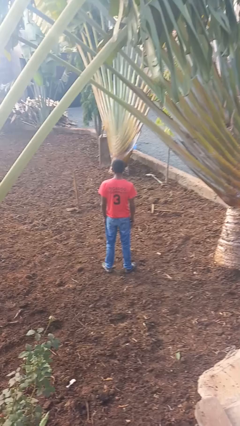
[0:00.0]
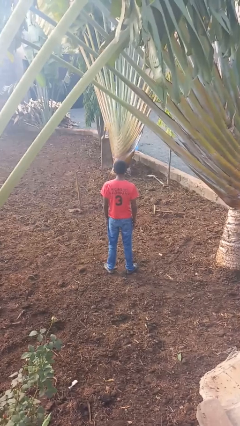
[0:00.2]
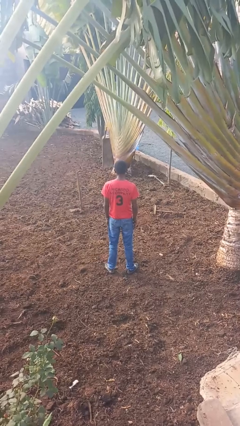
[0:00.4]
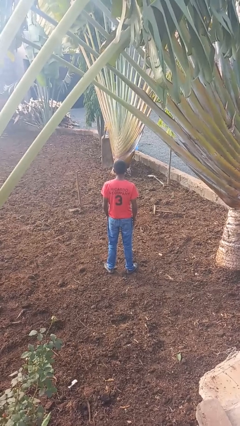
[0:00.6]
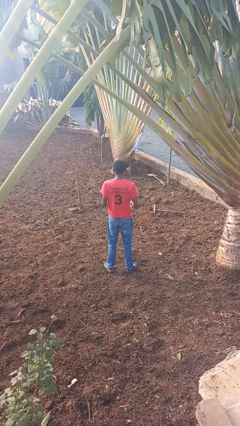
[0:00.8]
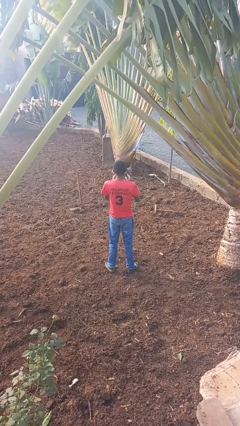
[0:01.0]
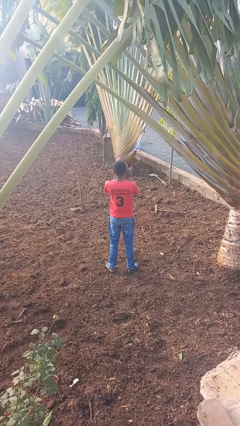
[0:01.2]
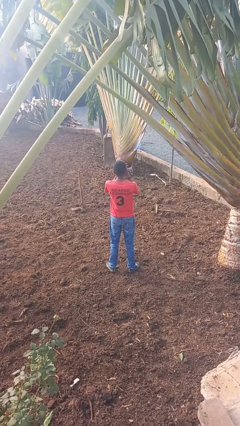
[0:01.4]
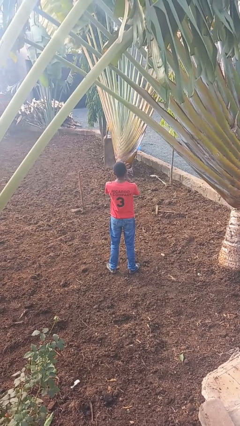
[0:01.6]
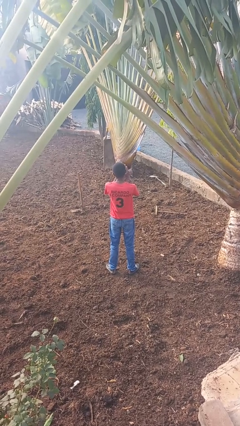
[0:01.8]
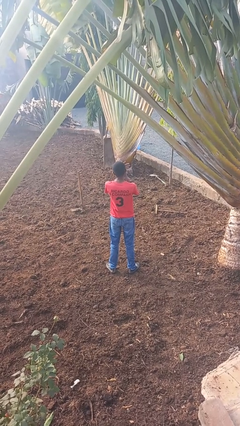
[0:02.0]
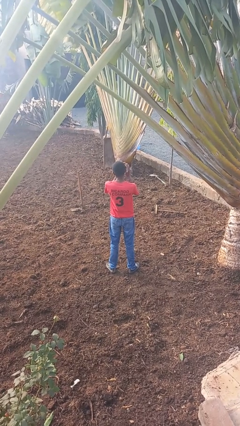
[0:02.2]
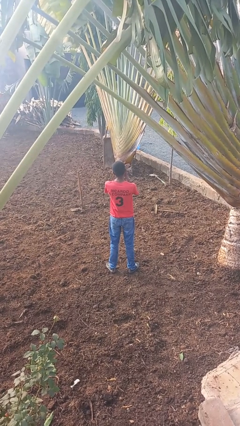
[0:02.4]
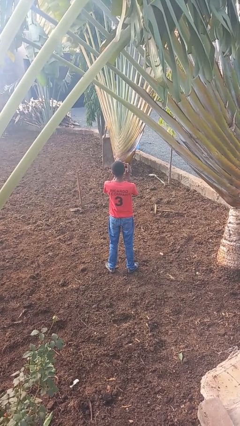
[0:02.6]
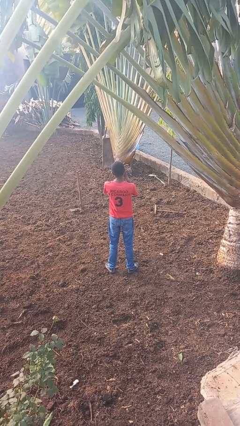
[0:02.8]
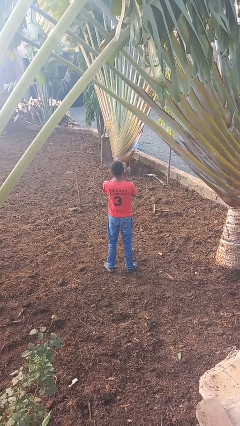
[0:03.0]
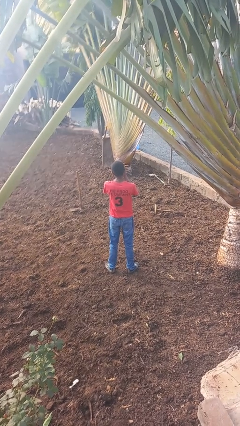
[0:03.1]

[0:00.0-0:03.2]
person claps hands

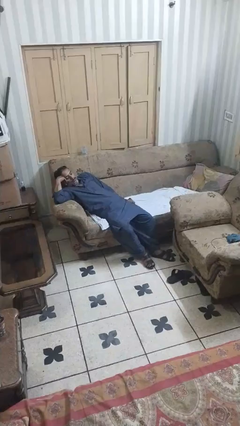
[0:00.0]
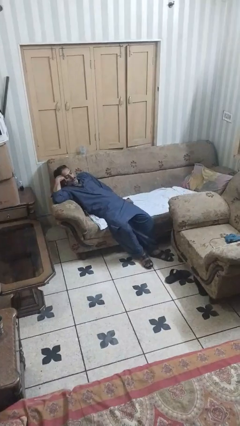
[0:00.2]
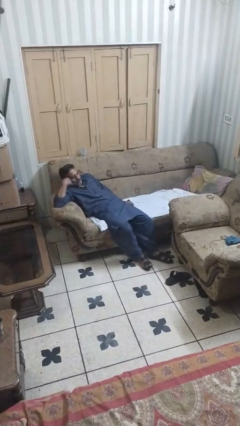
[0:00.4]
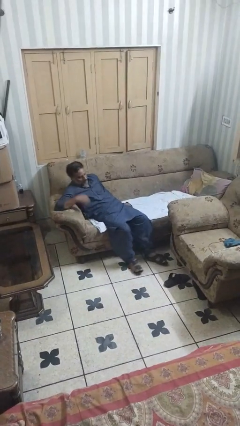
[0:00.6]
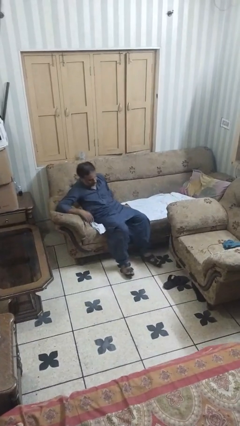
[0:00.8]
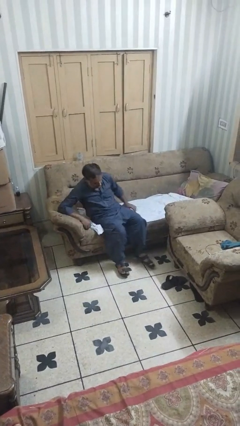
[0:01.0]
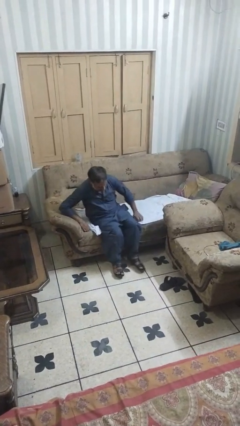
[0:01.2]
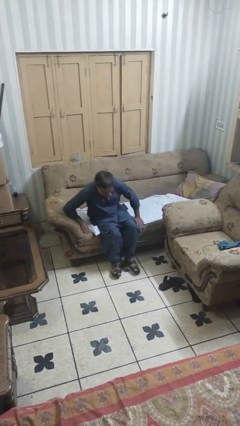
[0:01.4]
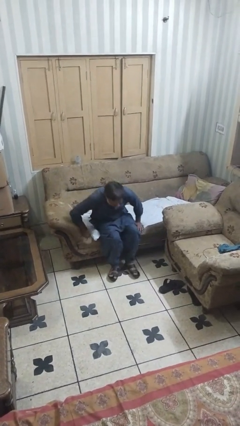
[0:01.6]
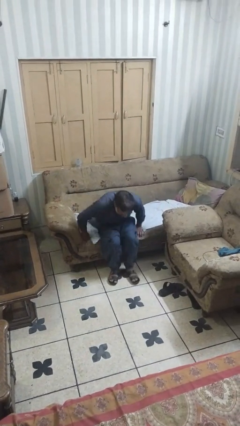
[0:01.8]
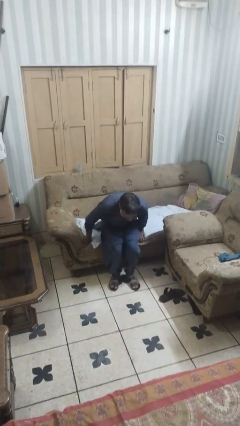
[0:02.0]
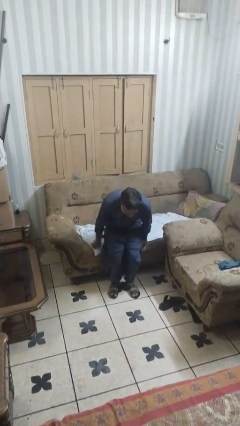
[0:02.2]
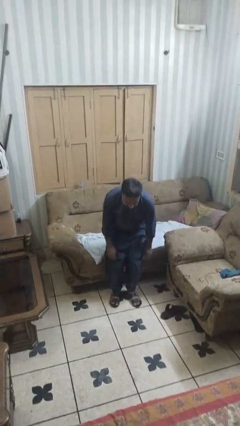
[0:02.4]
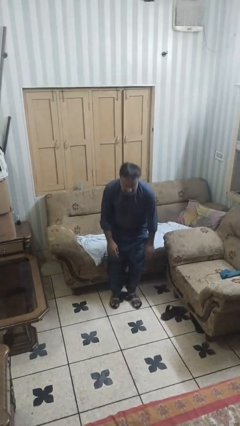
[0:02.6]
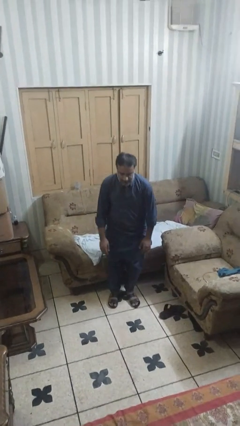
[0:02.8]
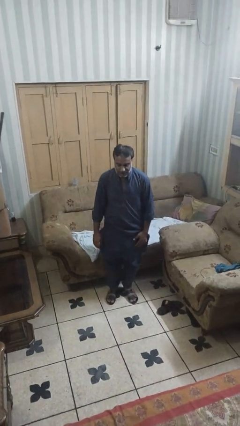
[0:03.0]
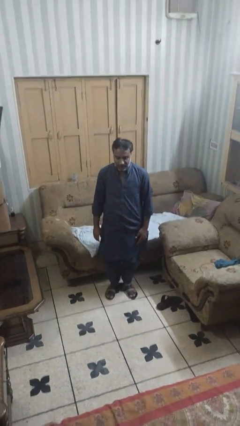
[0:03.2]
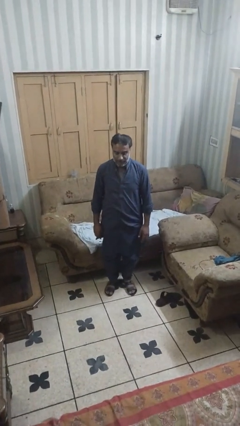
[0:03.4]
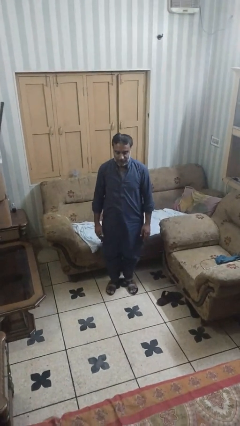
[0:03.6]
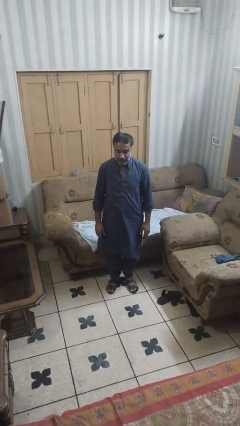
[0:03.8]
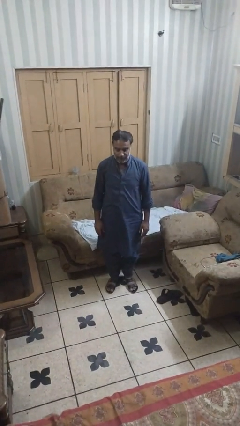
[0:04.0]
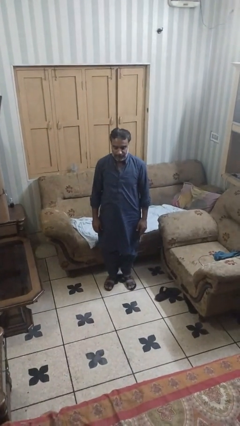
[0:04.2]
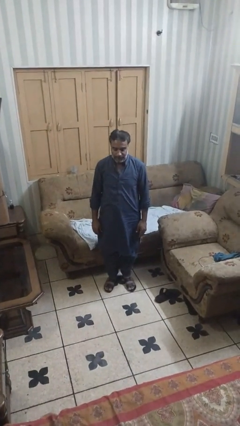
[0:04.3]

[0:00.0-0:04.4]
person stands up

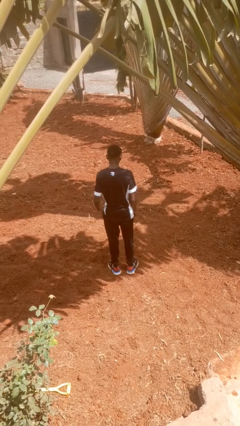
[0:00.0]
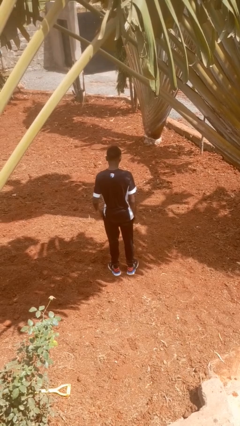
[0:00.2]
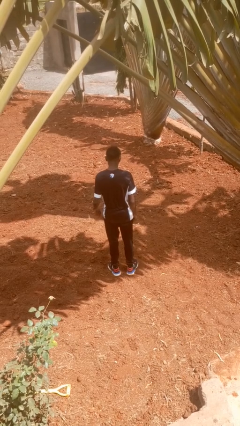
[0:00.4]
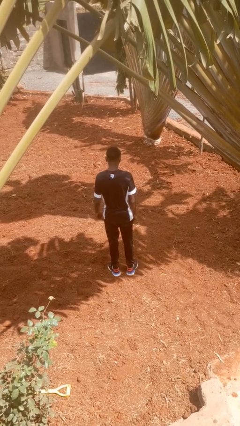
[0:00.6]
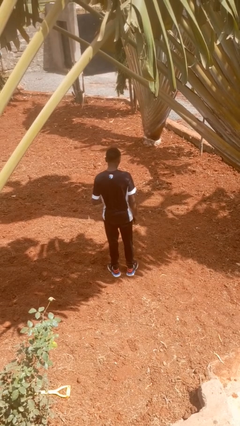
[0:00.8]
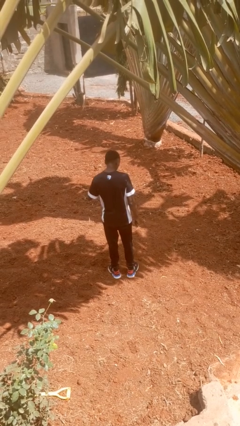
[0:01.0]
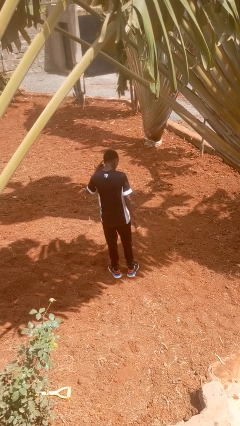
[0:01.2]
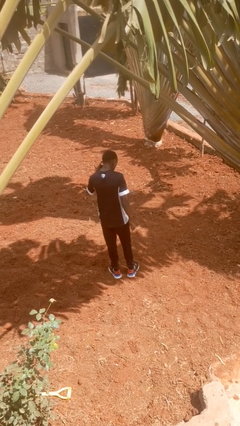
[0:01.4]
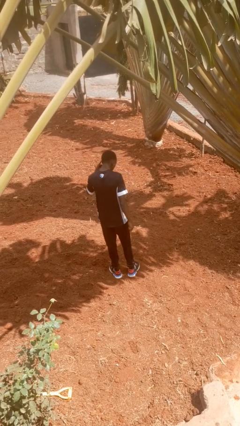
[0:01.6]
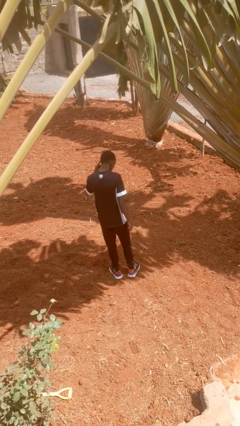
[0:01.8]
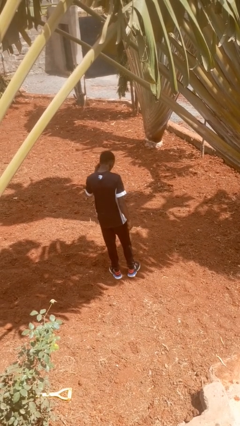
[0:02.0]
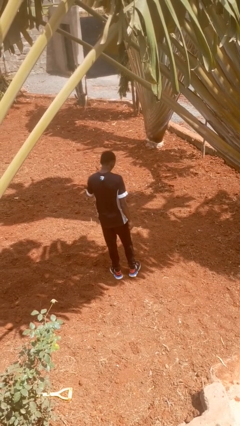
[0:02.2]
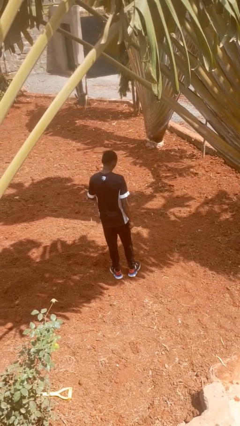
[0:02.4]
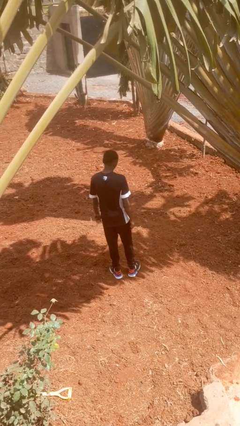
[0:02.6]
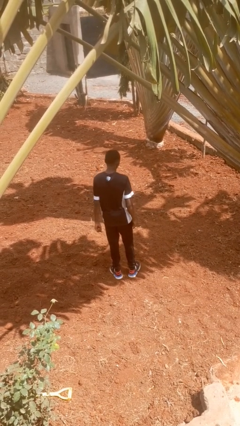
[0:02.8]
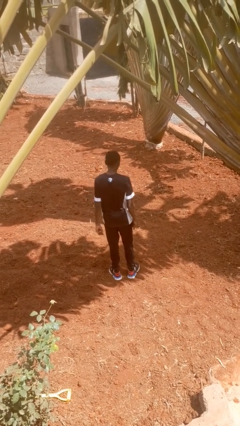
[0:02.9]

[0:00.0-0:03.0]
person gestures listen closely

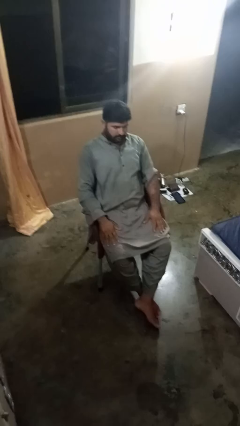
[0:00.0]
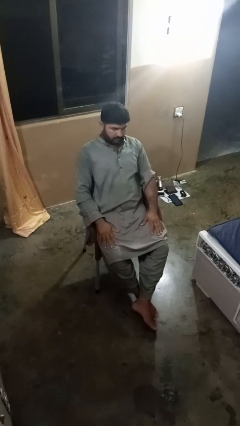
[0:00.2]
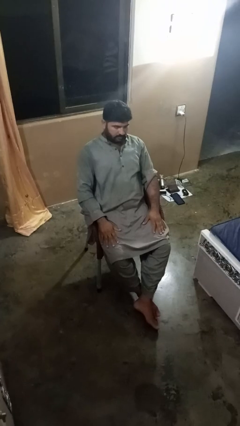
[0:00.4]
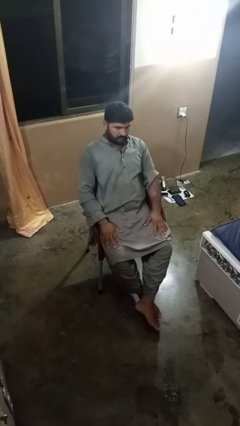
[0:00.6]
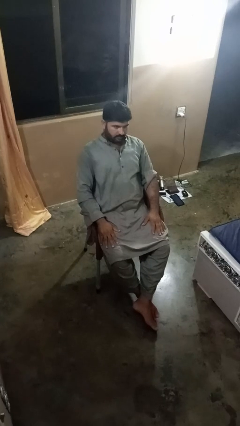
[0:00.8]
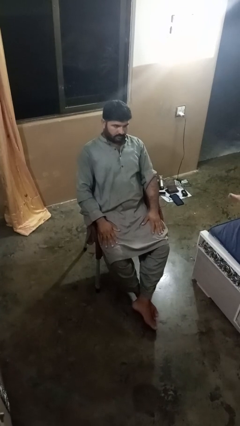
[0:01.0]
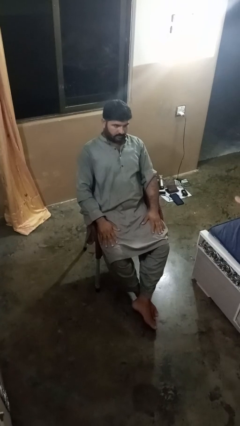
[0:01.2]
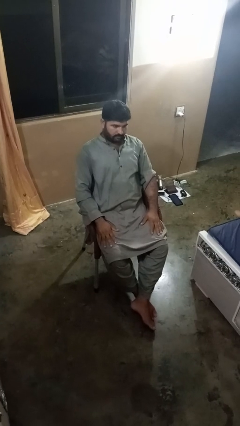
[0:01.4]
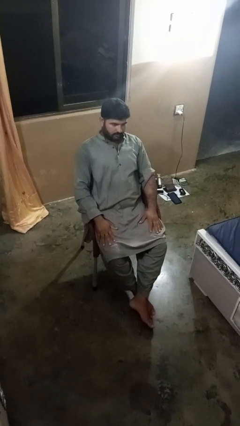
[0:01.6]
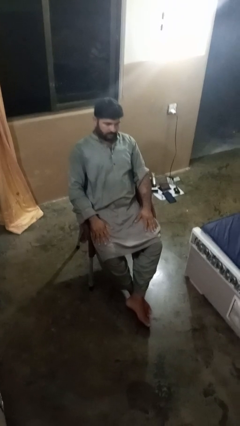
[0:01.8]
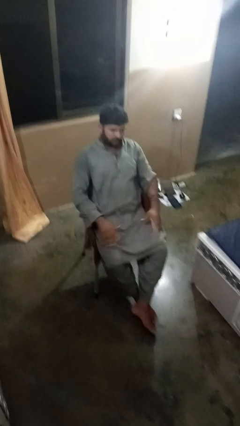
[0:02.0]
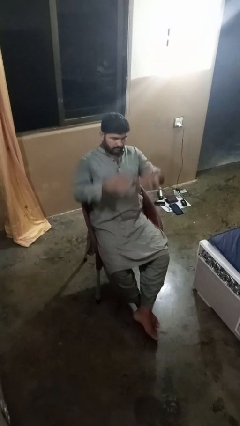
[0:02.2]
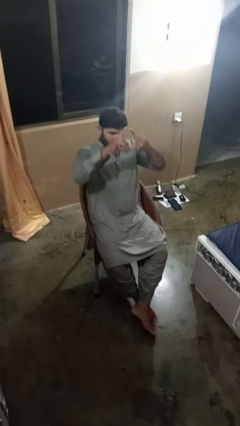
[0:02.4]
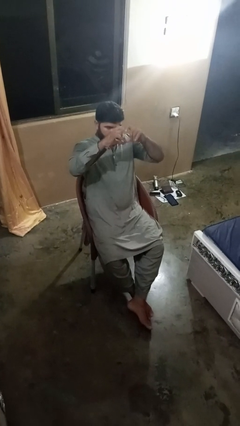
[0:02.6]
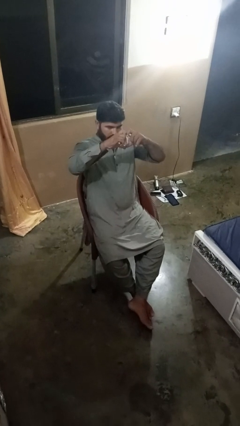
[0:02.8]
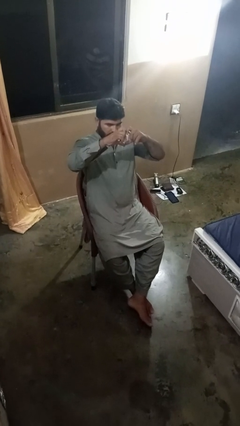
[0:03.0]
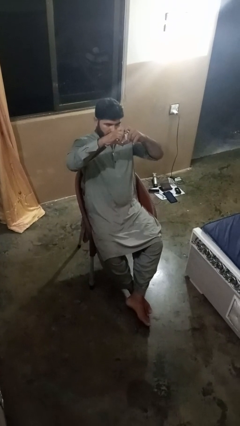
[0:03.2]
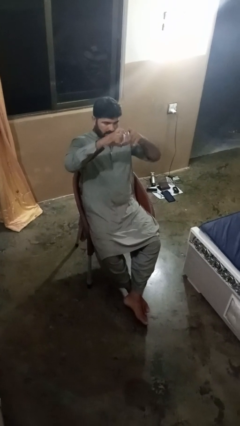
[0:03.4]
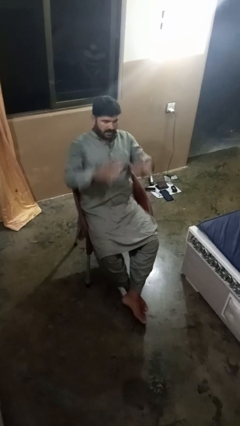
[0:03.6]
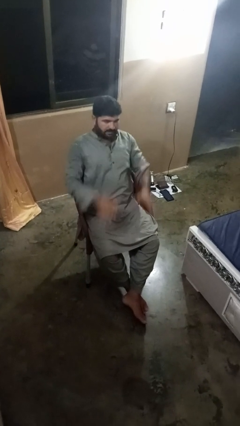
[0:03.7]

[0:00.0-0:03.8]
person gestures heart

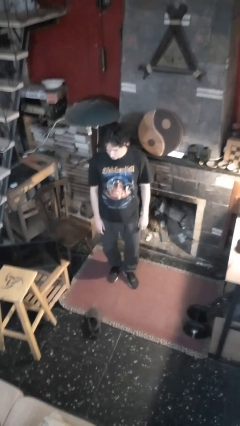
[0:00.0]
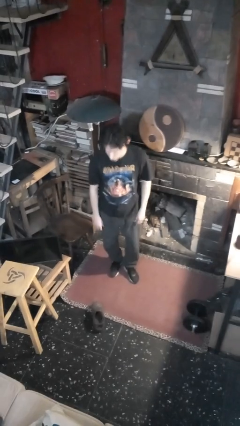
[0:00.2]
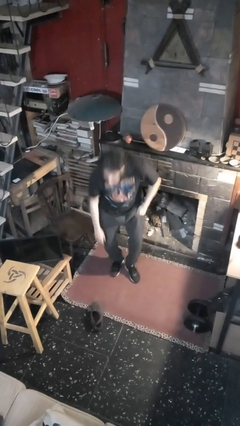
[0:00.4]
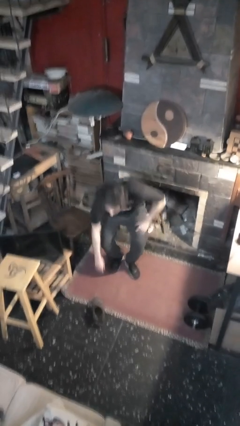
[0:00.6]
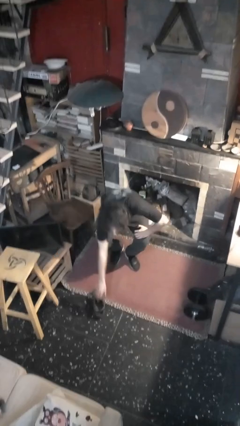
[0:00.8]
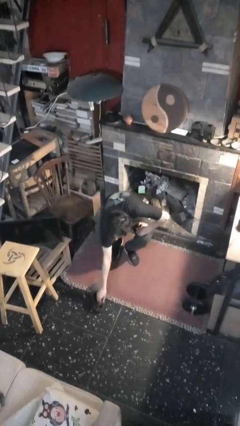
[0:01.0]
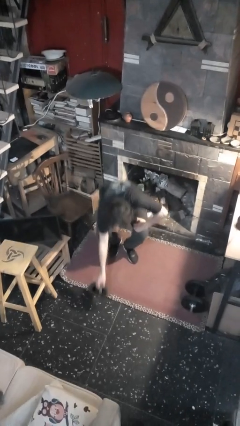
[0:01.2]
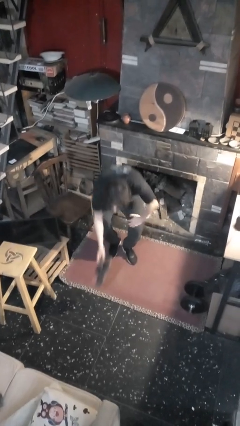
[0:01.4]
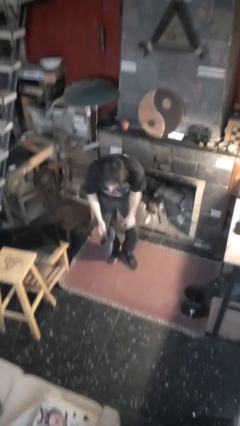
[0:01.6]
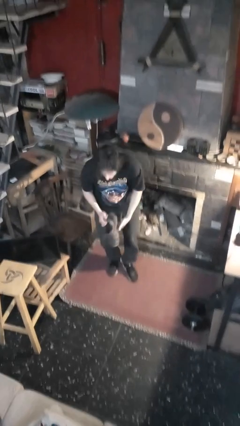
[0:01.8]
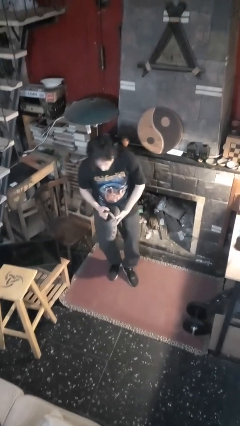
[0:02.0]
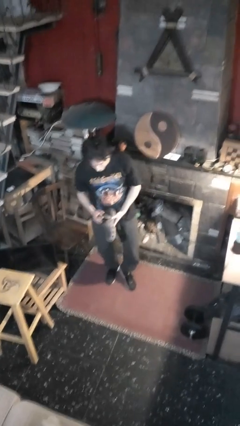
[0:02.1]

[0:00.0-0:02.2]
person picks up object from floor

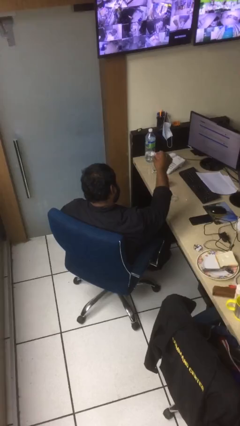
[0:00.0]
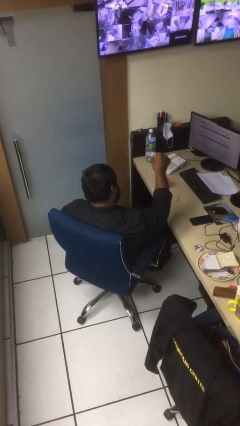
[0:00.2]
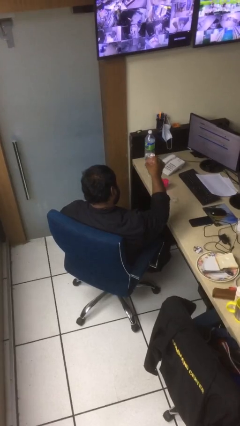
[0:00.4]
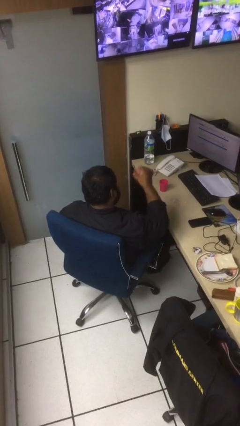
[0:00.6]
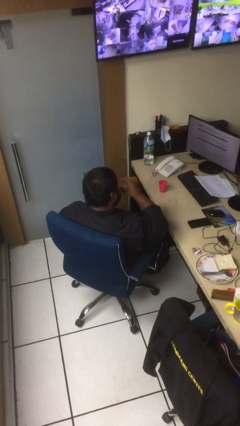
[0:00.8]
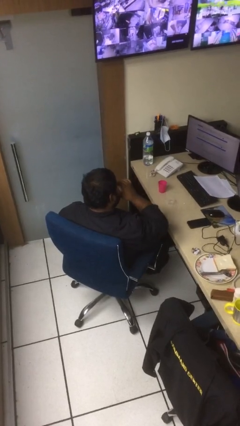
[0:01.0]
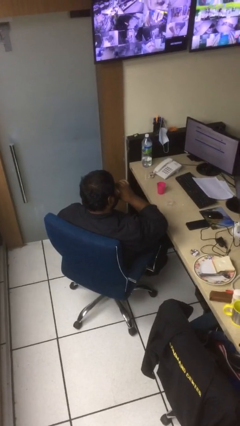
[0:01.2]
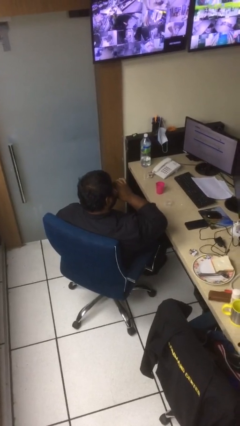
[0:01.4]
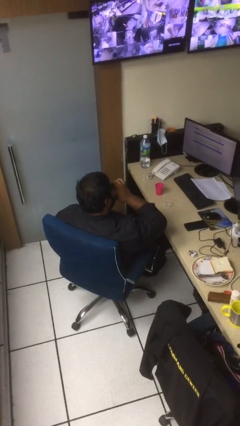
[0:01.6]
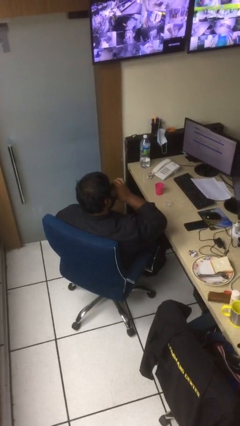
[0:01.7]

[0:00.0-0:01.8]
person drinks from shotglass
